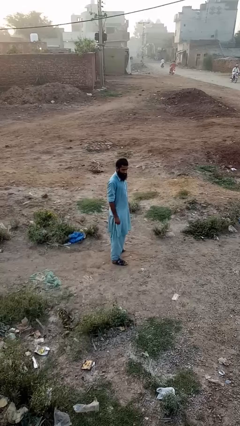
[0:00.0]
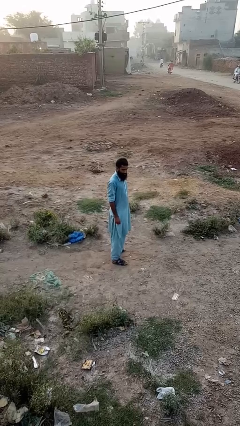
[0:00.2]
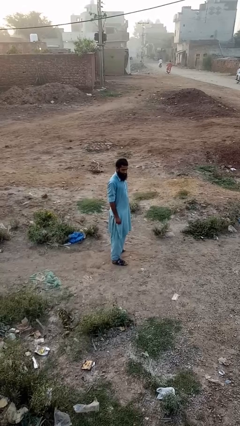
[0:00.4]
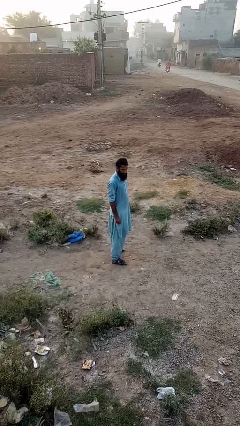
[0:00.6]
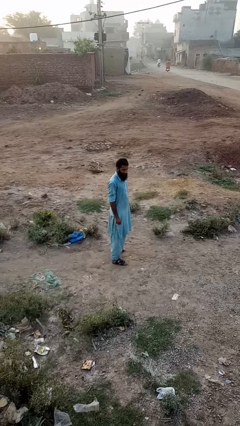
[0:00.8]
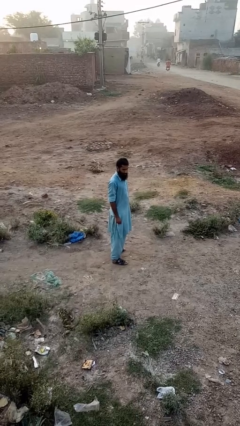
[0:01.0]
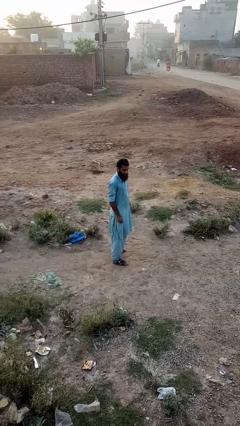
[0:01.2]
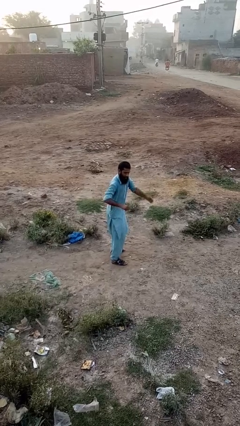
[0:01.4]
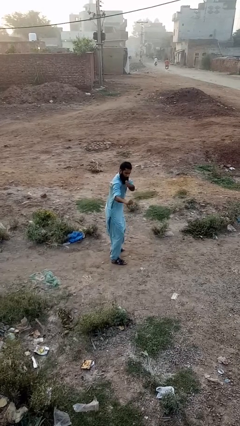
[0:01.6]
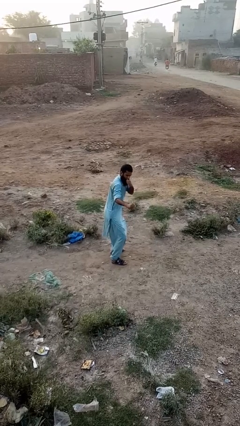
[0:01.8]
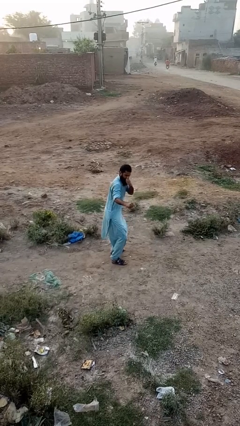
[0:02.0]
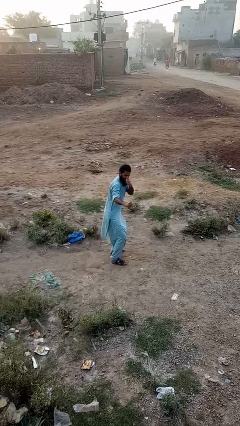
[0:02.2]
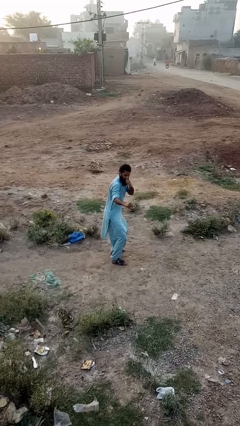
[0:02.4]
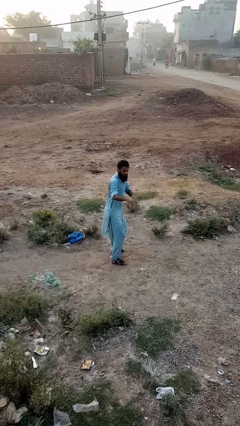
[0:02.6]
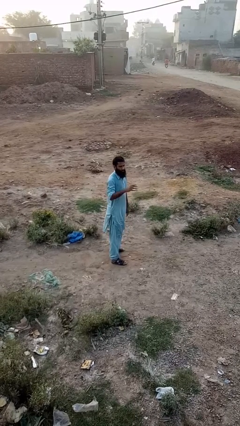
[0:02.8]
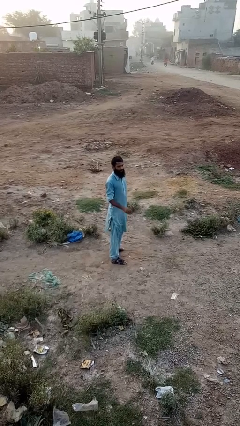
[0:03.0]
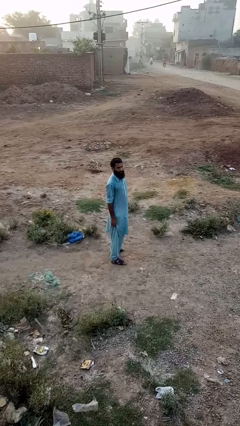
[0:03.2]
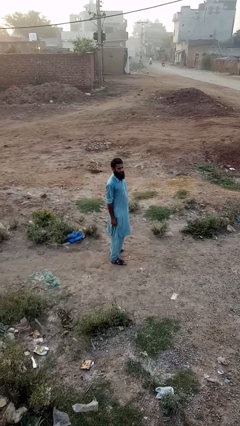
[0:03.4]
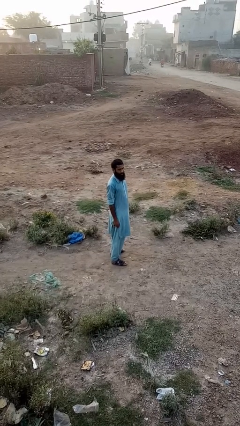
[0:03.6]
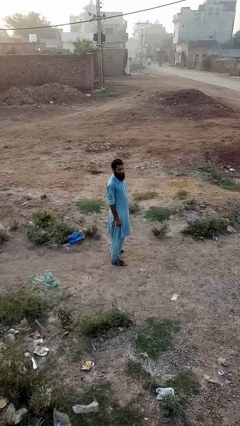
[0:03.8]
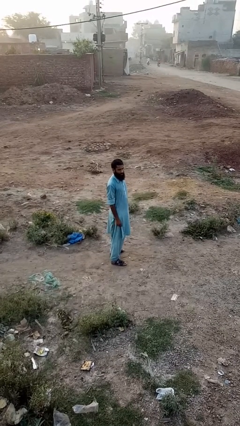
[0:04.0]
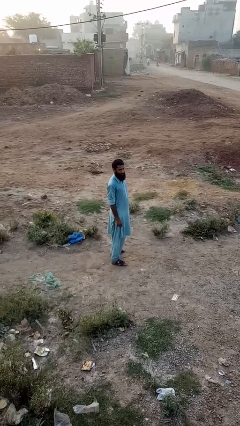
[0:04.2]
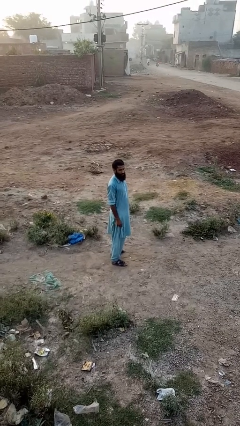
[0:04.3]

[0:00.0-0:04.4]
person karate chop

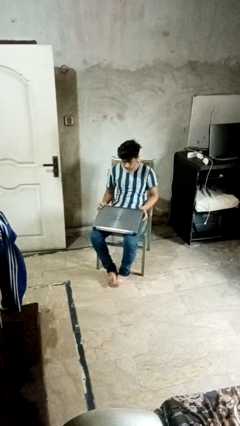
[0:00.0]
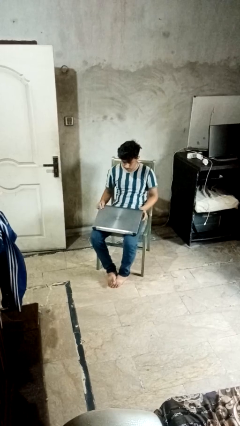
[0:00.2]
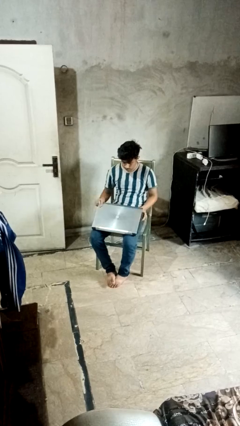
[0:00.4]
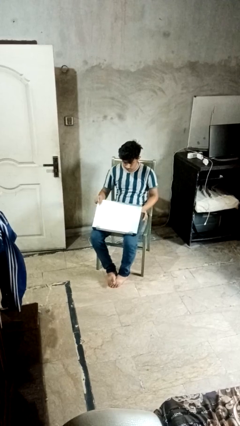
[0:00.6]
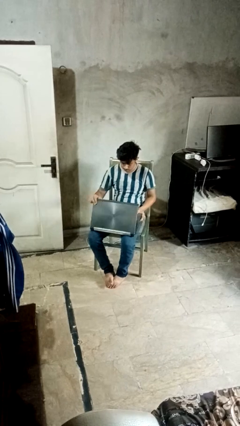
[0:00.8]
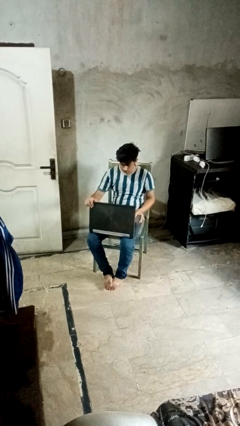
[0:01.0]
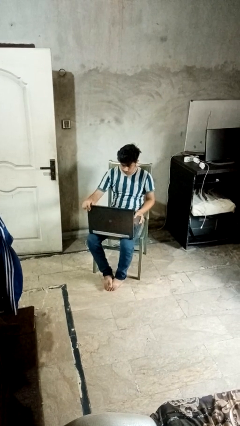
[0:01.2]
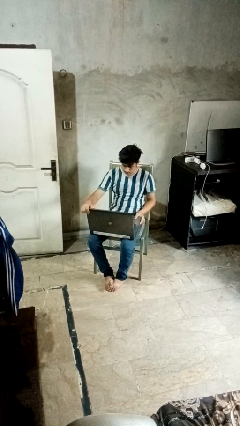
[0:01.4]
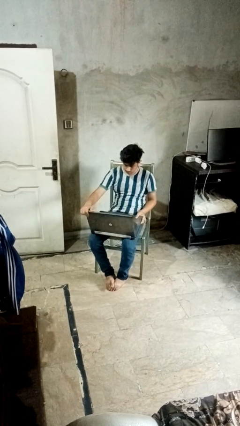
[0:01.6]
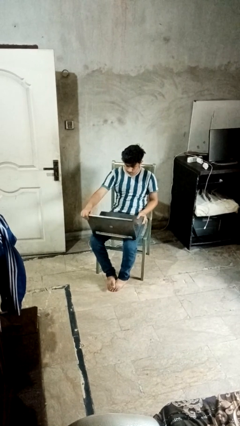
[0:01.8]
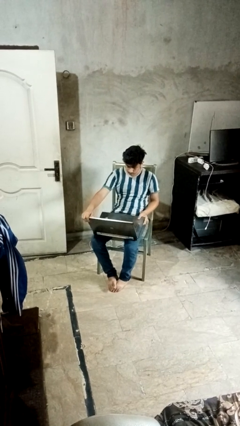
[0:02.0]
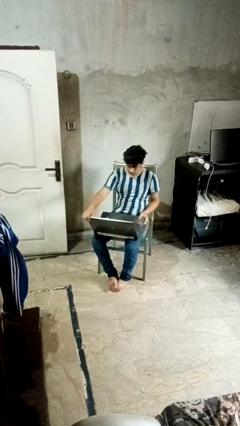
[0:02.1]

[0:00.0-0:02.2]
person opens laptop

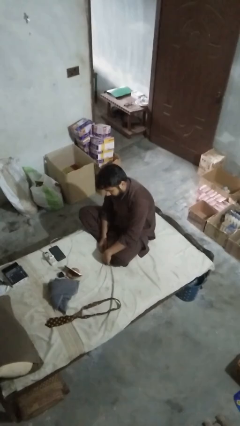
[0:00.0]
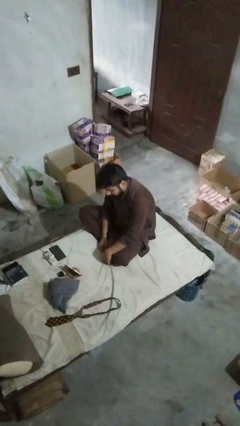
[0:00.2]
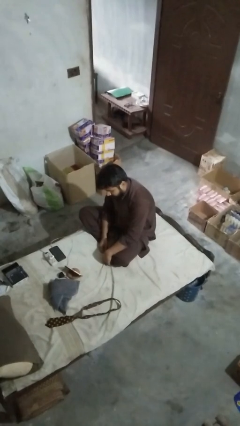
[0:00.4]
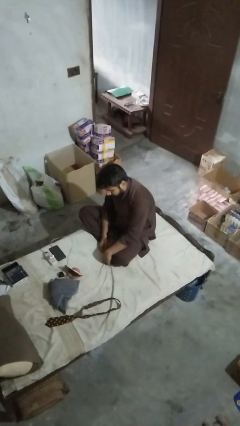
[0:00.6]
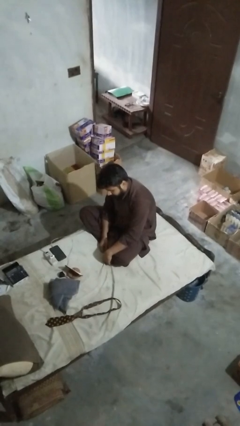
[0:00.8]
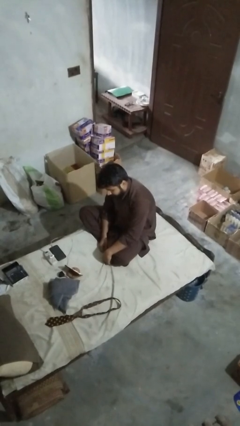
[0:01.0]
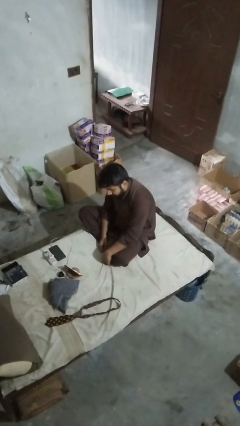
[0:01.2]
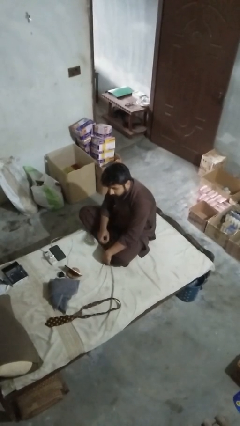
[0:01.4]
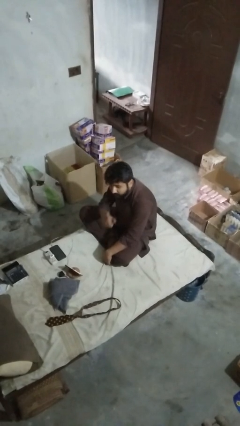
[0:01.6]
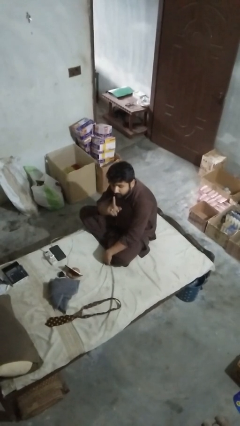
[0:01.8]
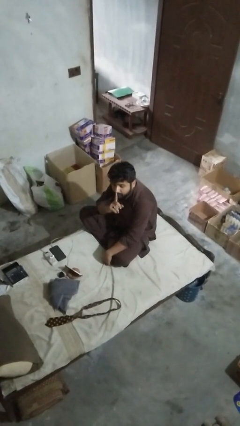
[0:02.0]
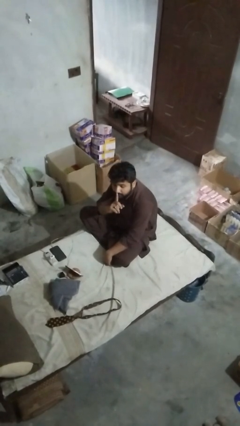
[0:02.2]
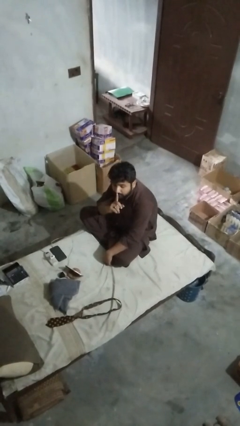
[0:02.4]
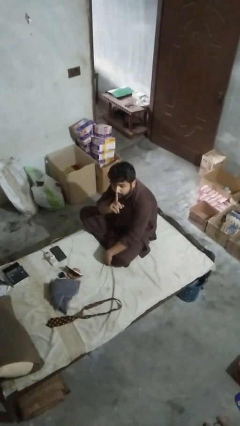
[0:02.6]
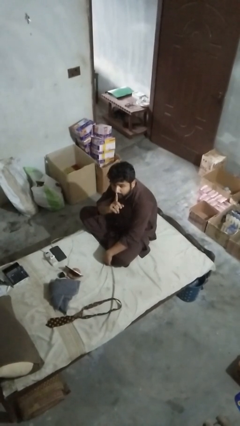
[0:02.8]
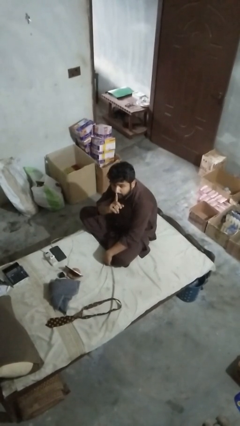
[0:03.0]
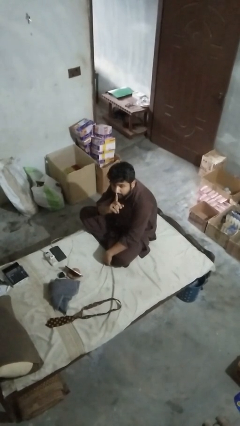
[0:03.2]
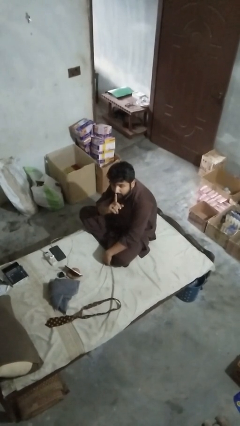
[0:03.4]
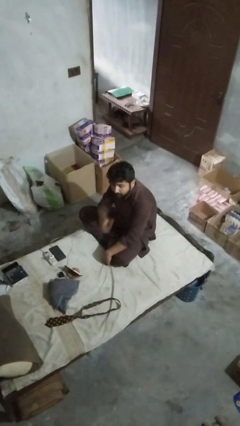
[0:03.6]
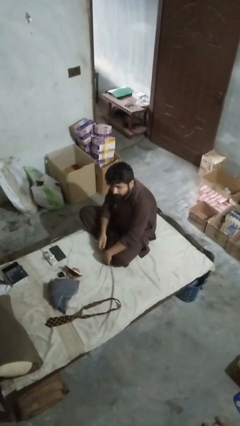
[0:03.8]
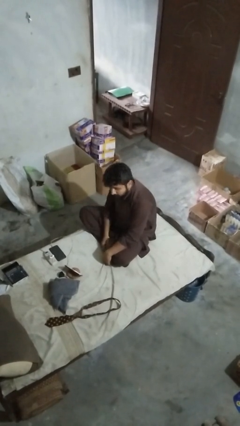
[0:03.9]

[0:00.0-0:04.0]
person gestures be quiet

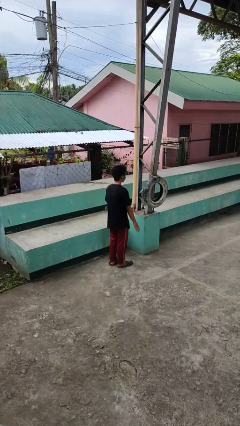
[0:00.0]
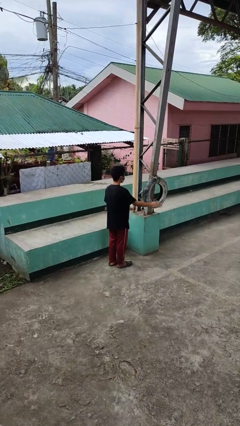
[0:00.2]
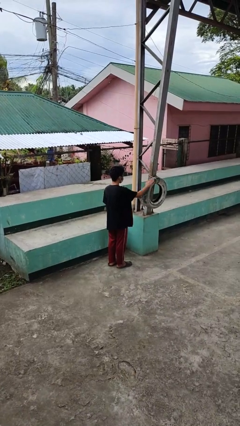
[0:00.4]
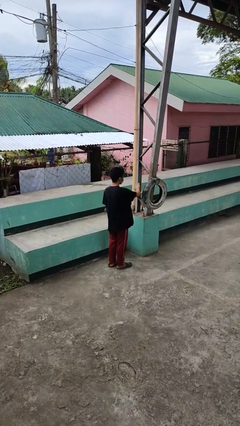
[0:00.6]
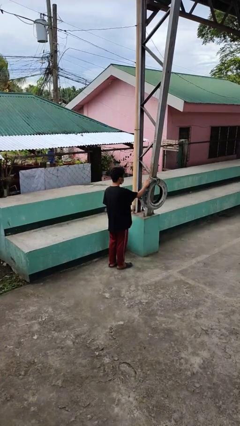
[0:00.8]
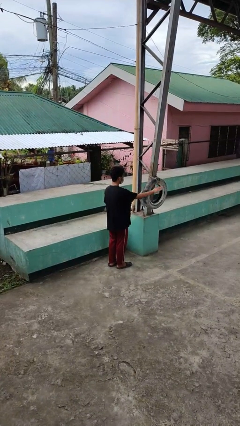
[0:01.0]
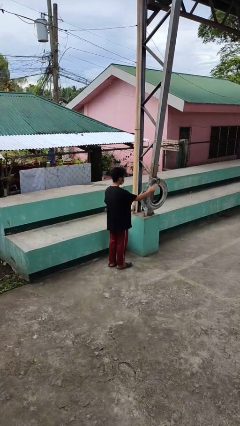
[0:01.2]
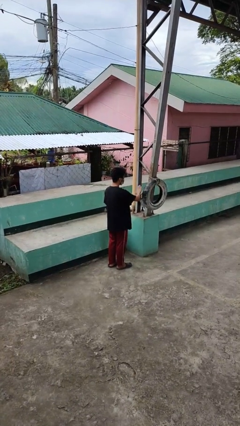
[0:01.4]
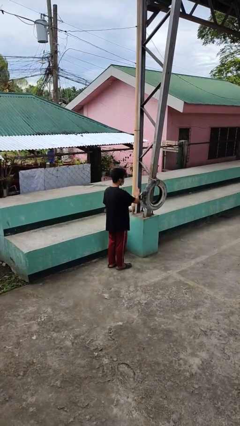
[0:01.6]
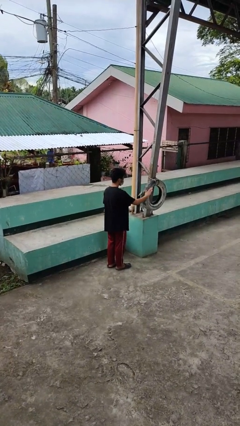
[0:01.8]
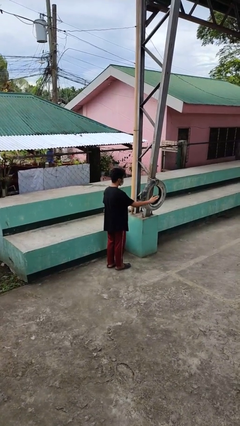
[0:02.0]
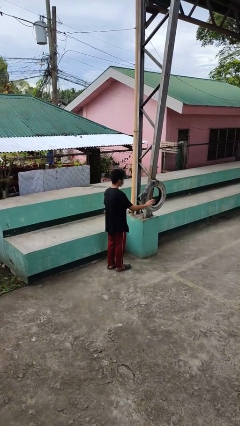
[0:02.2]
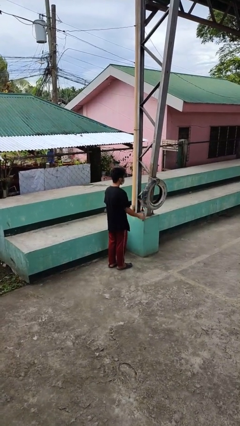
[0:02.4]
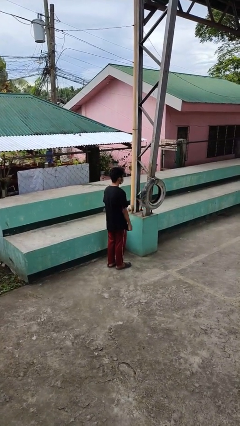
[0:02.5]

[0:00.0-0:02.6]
person waves hand over object

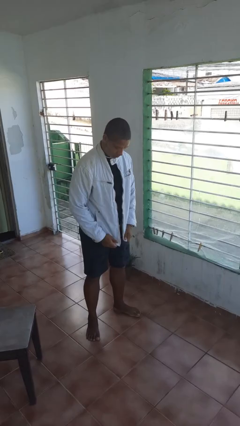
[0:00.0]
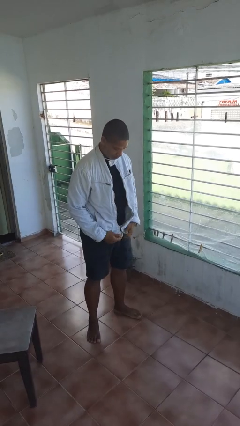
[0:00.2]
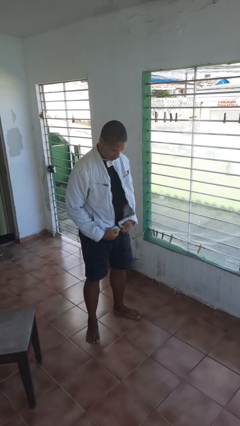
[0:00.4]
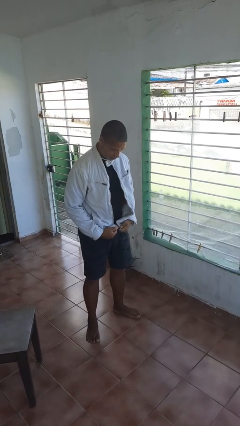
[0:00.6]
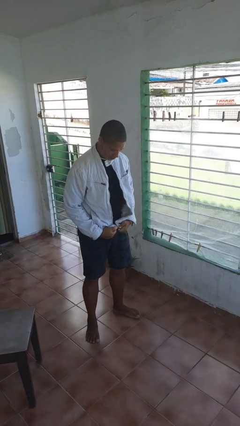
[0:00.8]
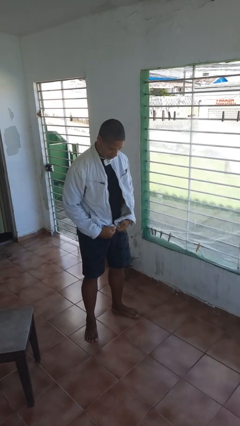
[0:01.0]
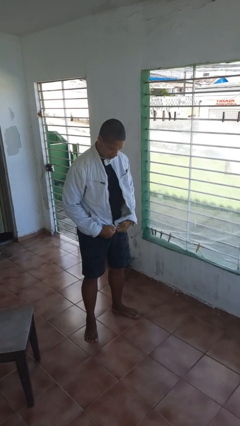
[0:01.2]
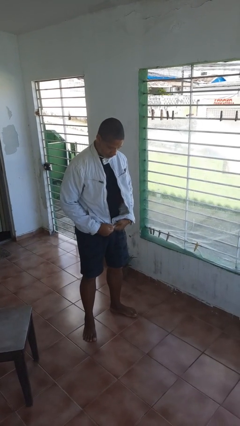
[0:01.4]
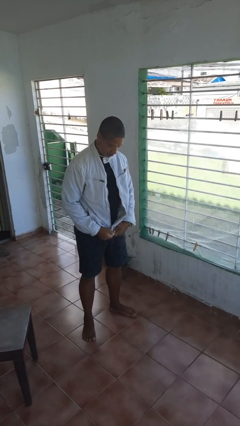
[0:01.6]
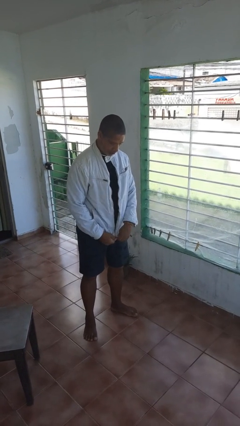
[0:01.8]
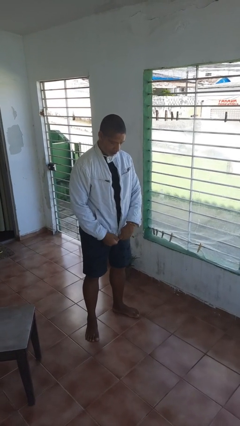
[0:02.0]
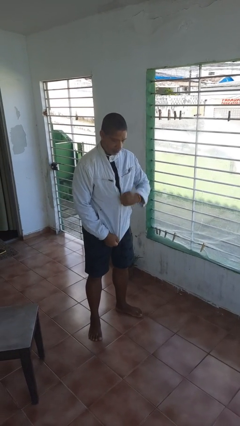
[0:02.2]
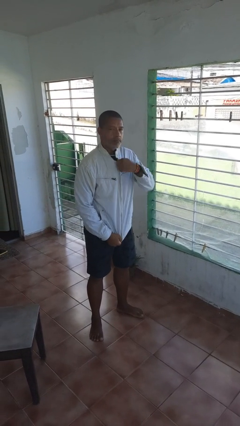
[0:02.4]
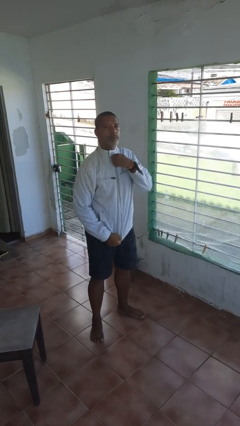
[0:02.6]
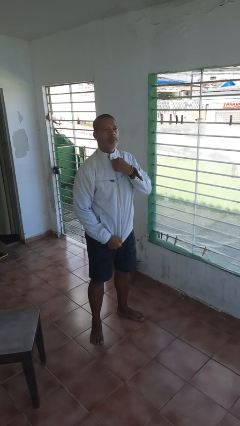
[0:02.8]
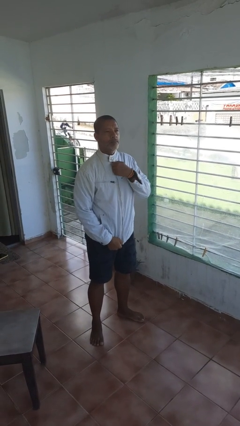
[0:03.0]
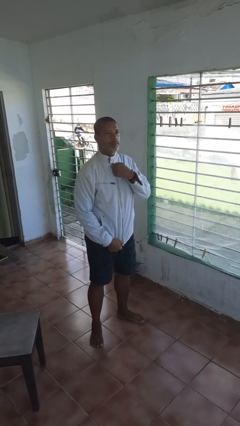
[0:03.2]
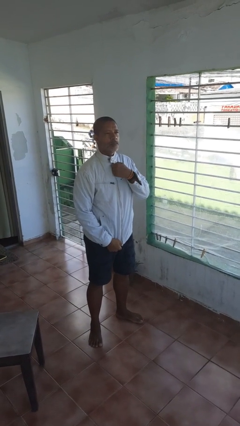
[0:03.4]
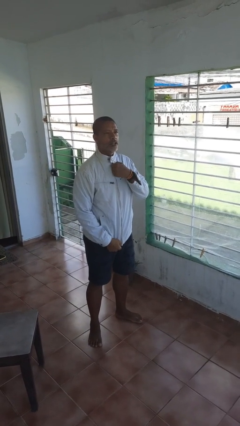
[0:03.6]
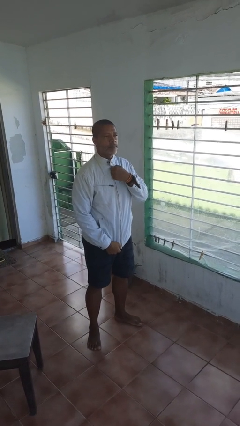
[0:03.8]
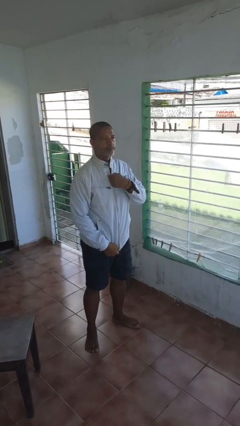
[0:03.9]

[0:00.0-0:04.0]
person zips up jacket

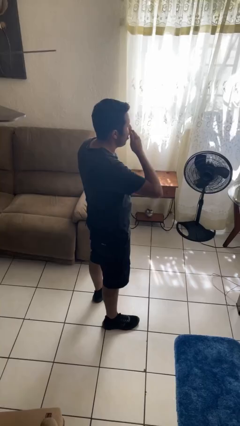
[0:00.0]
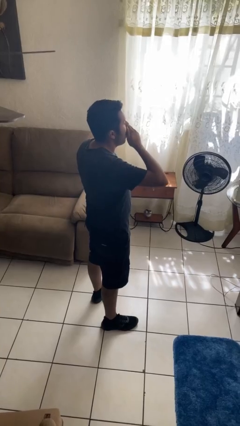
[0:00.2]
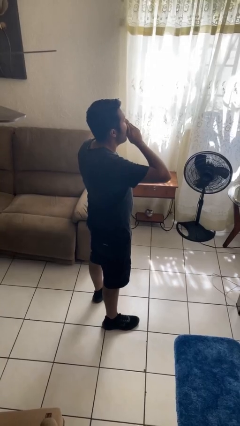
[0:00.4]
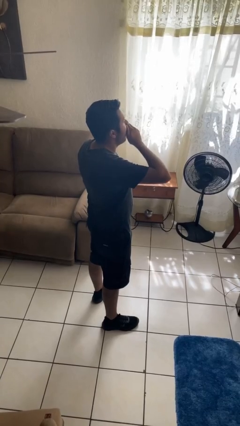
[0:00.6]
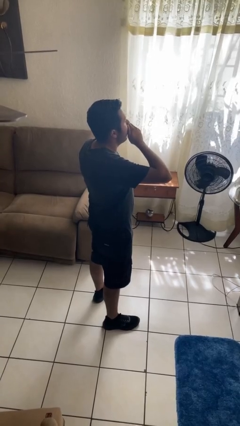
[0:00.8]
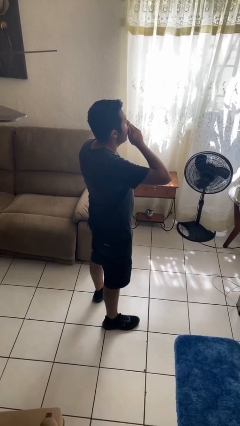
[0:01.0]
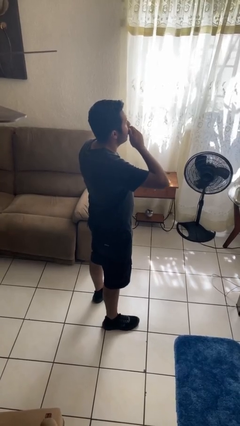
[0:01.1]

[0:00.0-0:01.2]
person yawns
